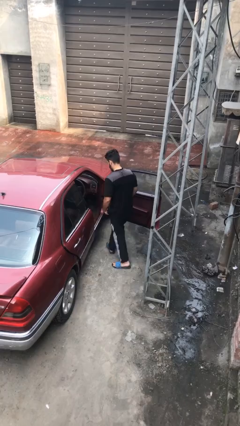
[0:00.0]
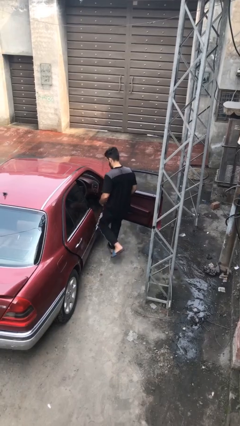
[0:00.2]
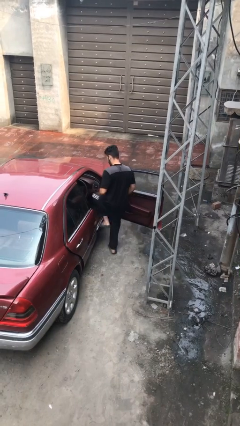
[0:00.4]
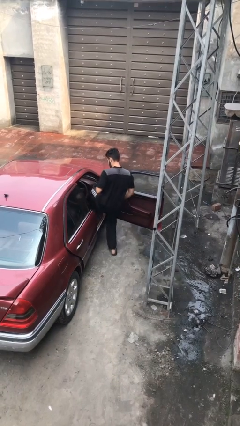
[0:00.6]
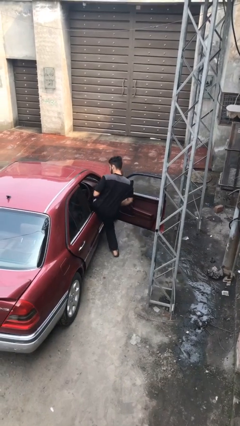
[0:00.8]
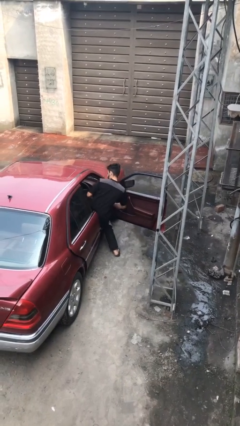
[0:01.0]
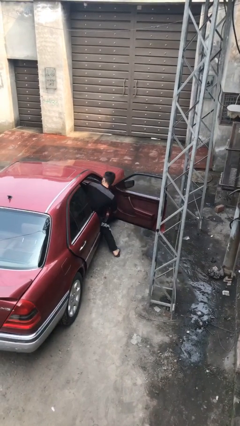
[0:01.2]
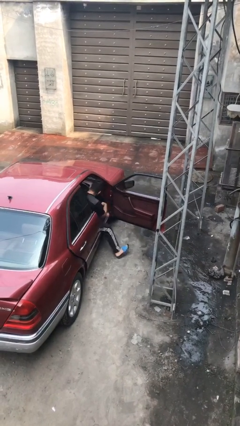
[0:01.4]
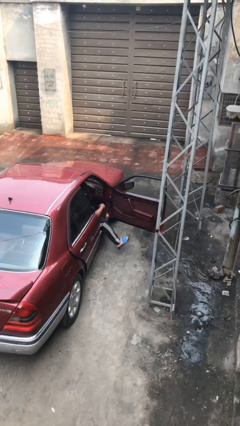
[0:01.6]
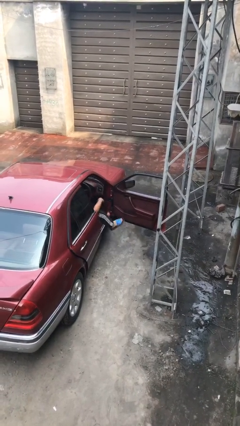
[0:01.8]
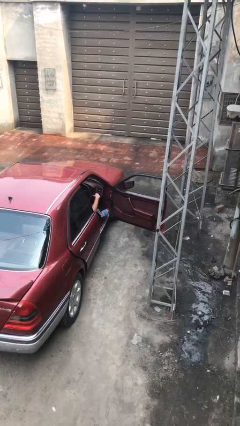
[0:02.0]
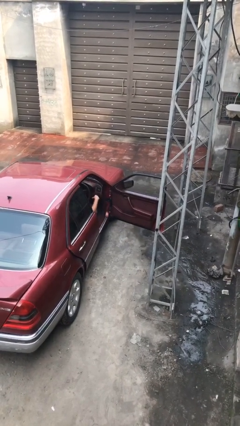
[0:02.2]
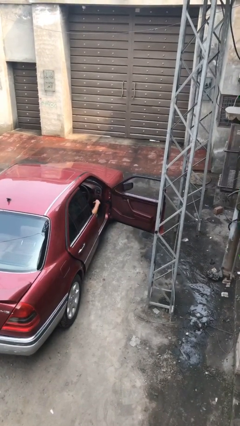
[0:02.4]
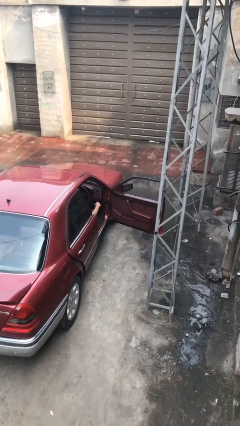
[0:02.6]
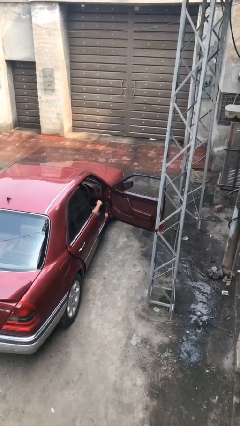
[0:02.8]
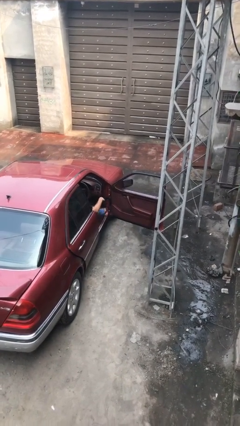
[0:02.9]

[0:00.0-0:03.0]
person enters car

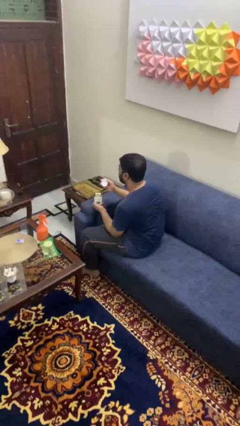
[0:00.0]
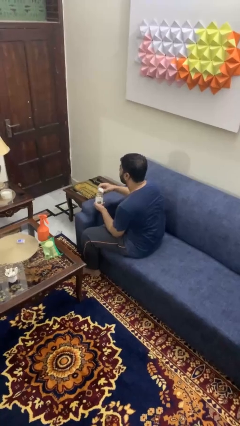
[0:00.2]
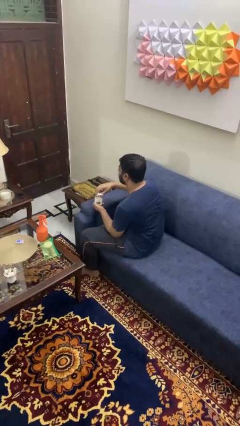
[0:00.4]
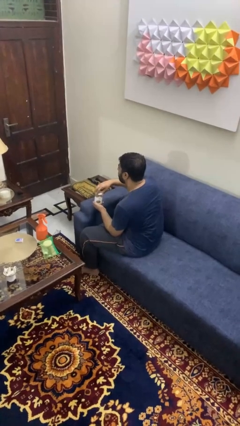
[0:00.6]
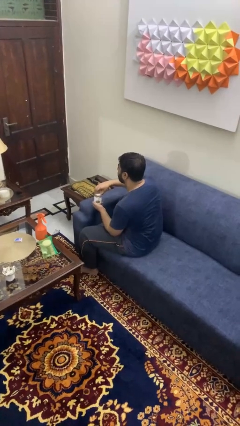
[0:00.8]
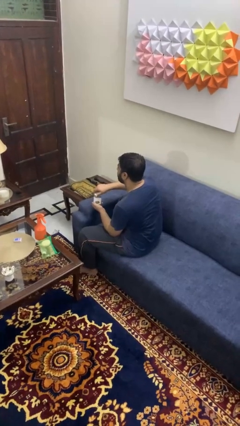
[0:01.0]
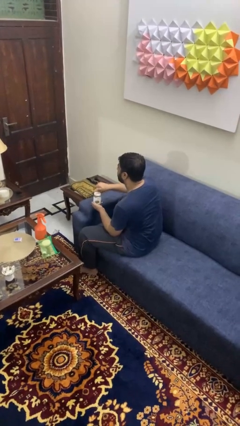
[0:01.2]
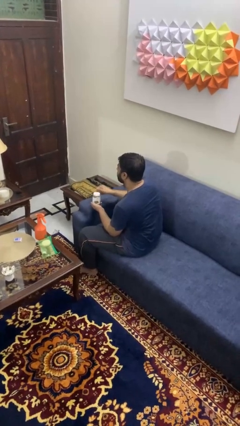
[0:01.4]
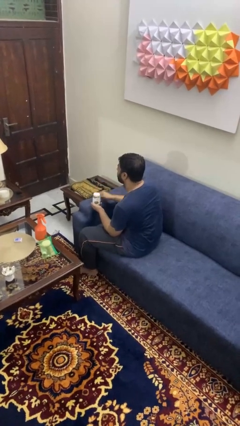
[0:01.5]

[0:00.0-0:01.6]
person closes jar

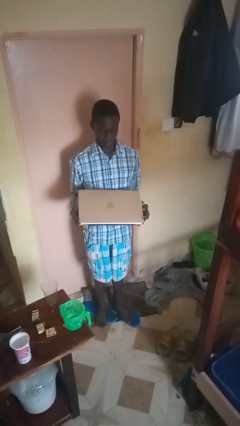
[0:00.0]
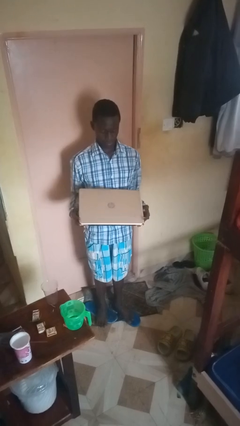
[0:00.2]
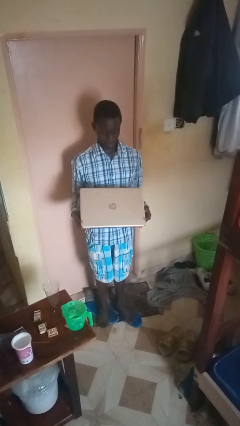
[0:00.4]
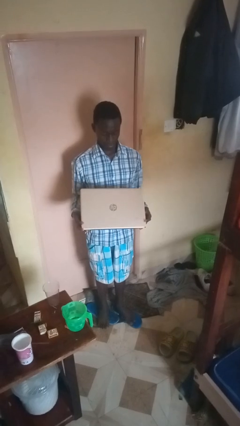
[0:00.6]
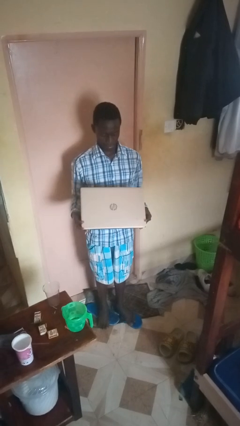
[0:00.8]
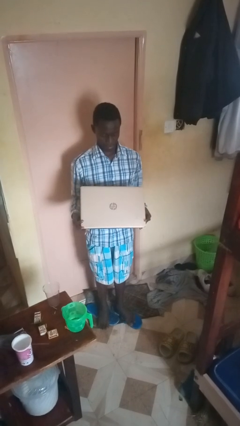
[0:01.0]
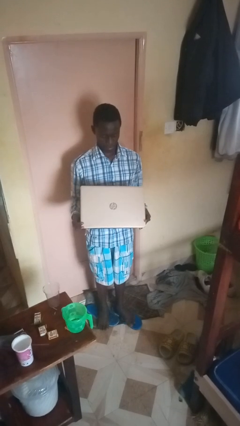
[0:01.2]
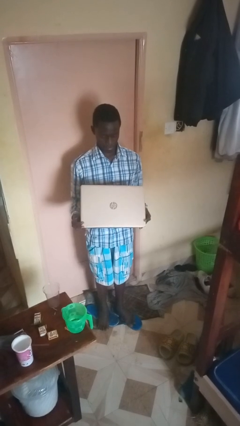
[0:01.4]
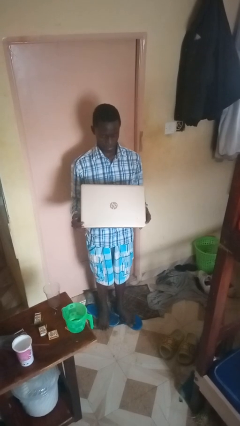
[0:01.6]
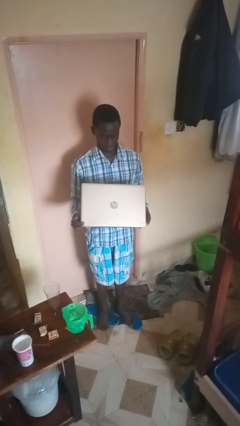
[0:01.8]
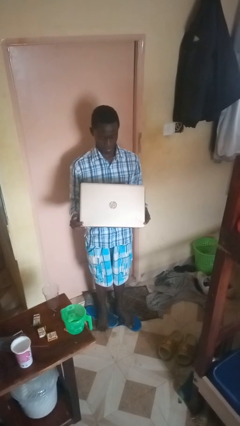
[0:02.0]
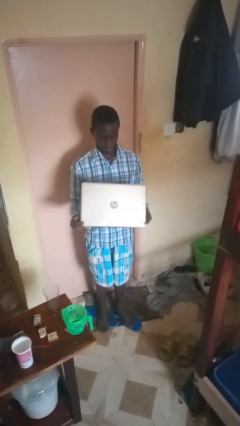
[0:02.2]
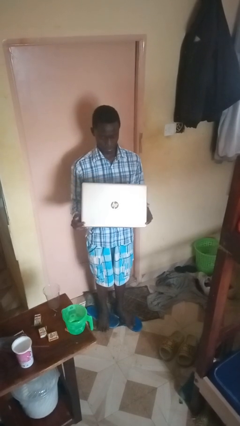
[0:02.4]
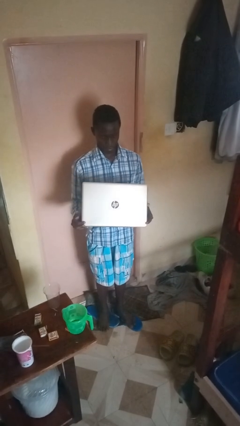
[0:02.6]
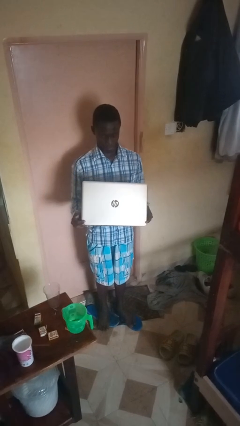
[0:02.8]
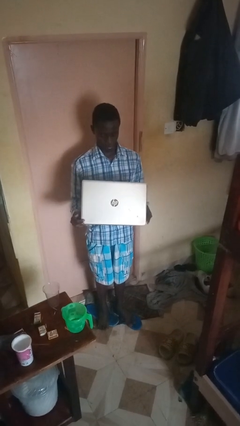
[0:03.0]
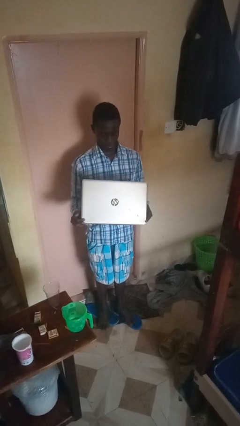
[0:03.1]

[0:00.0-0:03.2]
person opens laptop

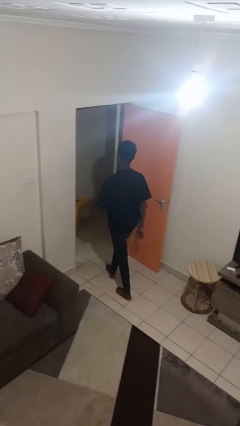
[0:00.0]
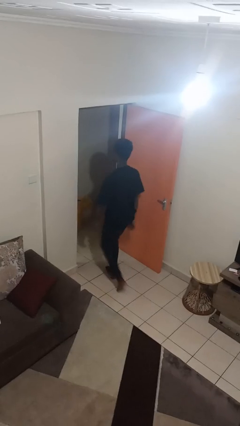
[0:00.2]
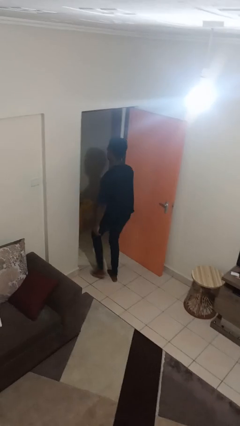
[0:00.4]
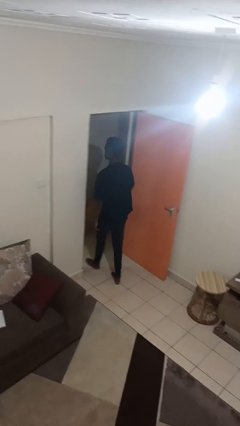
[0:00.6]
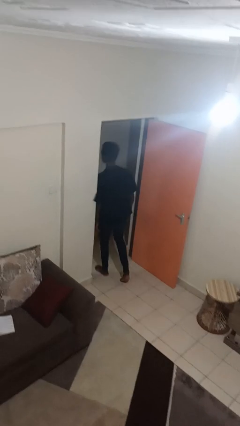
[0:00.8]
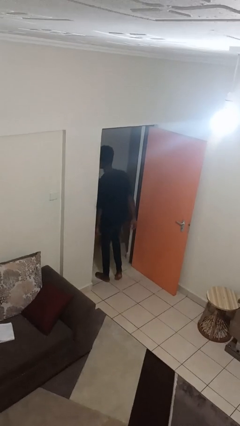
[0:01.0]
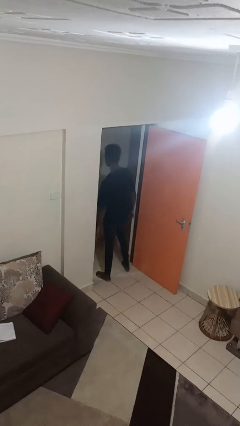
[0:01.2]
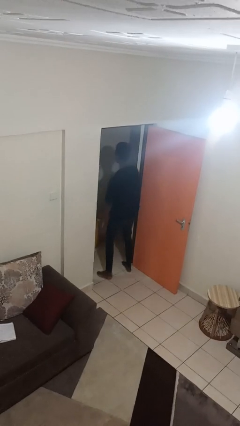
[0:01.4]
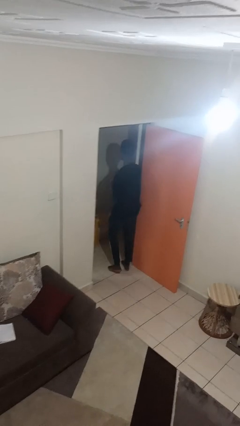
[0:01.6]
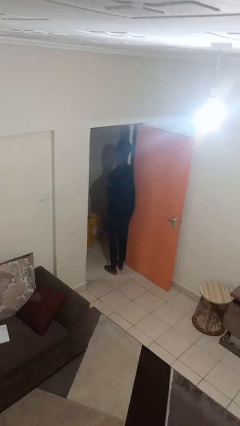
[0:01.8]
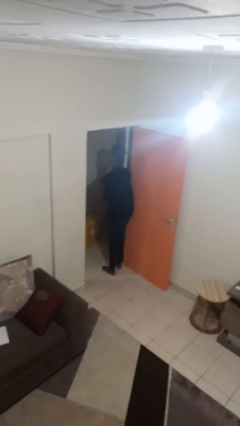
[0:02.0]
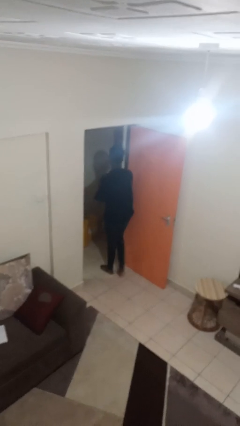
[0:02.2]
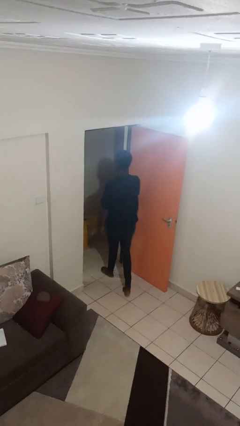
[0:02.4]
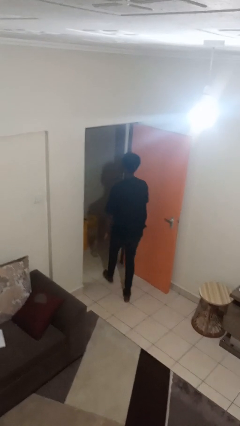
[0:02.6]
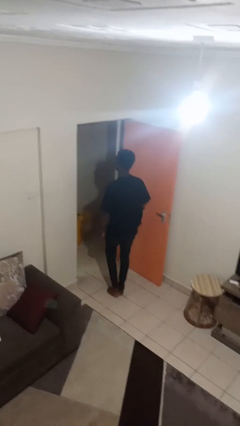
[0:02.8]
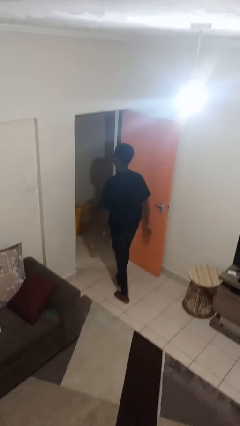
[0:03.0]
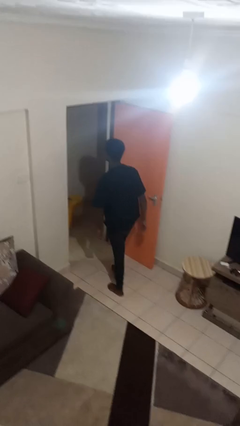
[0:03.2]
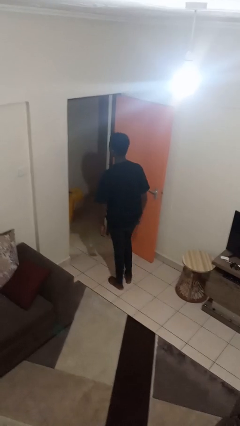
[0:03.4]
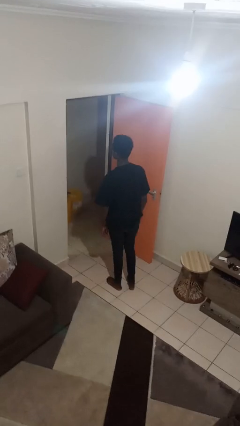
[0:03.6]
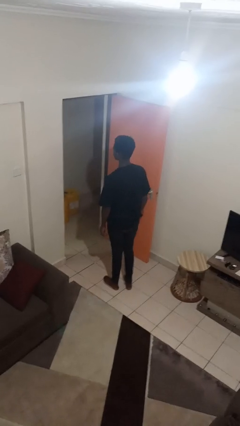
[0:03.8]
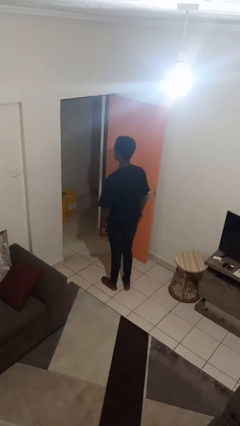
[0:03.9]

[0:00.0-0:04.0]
person bumps into wall

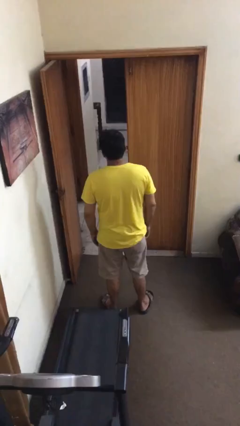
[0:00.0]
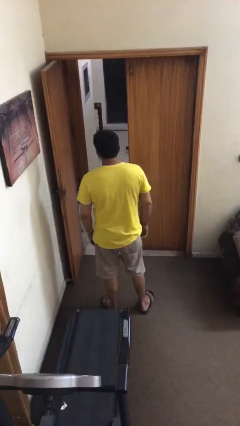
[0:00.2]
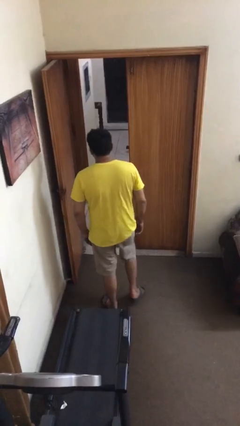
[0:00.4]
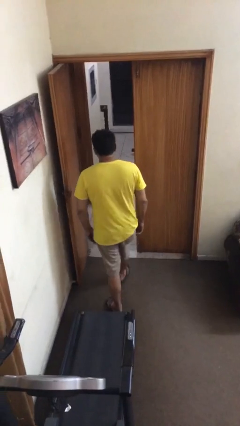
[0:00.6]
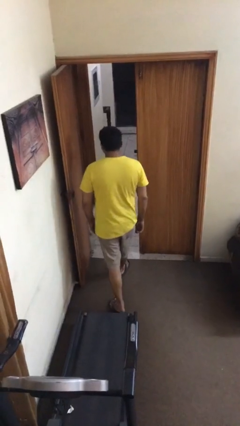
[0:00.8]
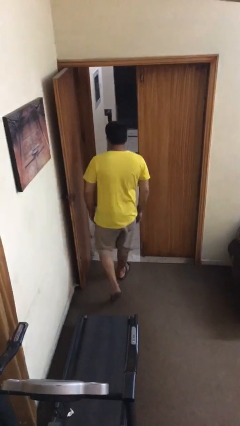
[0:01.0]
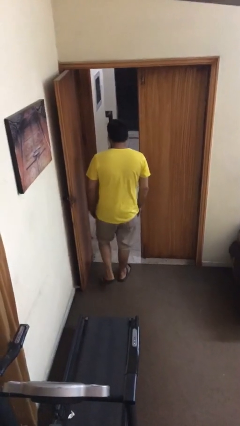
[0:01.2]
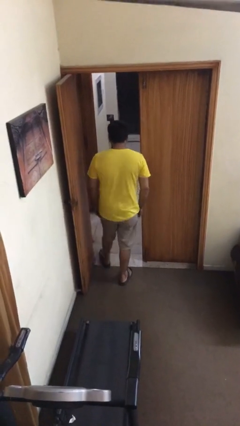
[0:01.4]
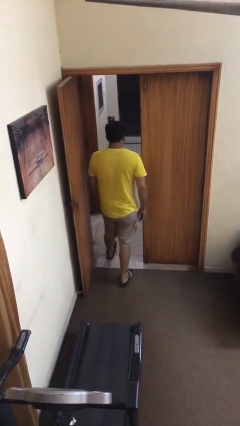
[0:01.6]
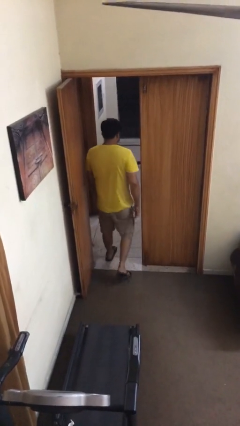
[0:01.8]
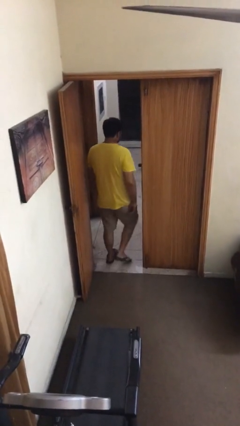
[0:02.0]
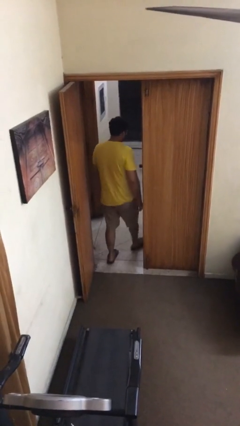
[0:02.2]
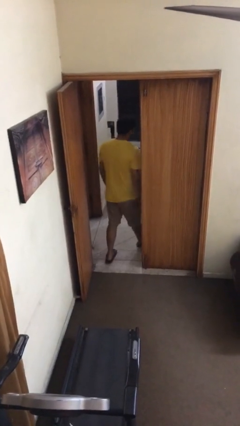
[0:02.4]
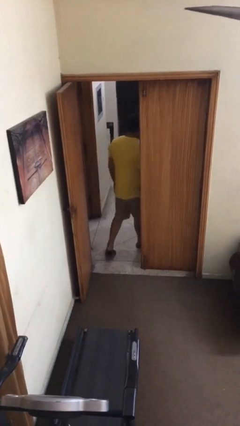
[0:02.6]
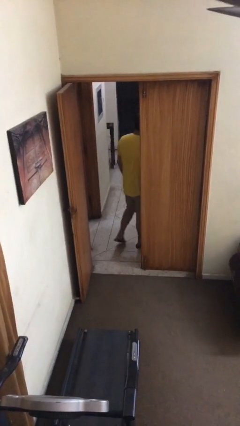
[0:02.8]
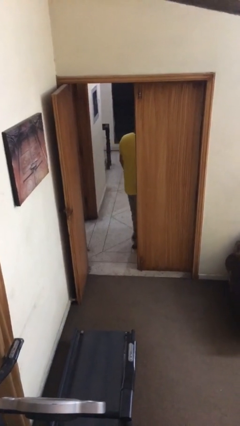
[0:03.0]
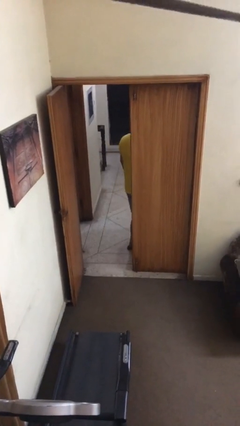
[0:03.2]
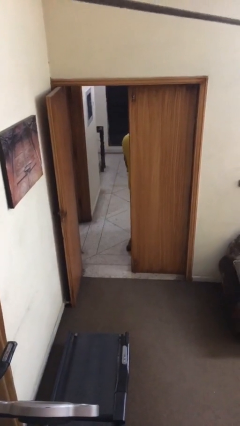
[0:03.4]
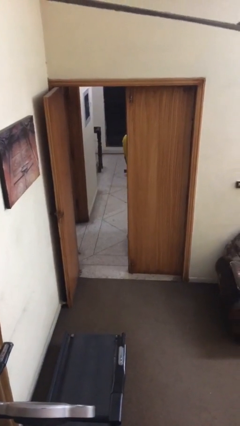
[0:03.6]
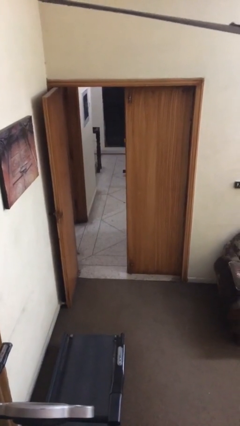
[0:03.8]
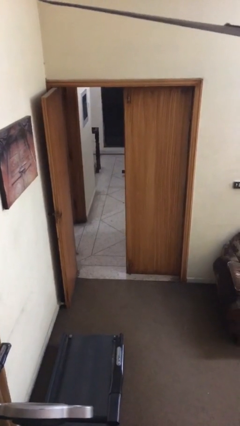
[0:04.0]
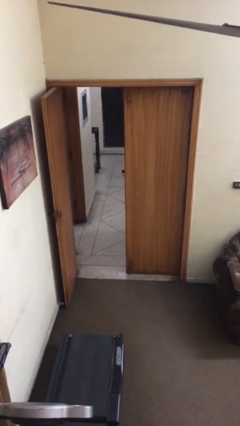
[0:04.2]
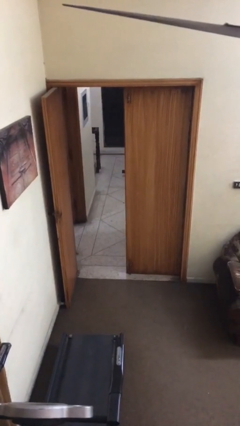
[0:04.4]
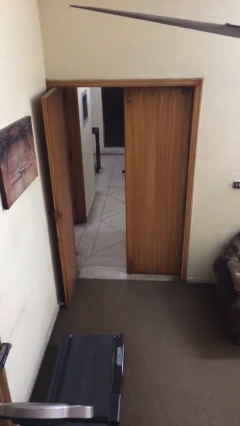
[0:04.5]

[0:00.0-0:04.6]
person exits scene through structure

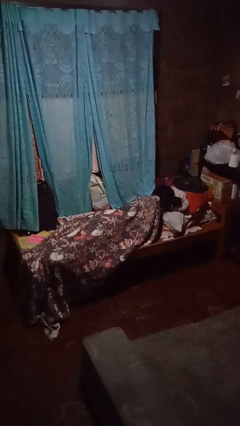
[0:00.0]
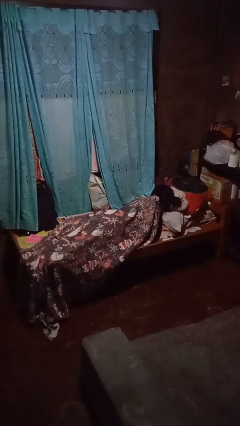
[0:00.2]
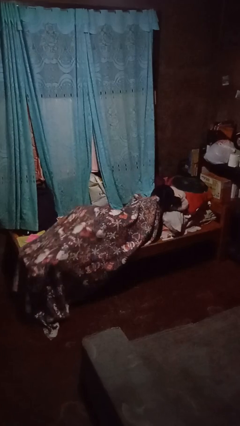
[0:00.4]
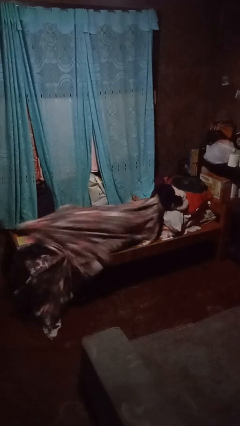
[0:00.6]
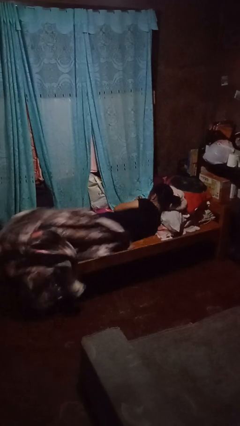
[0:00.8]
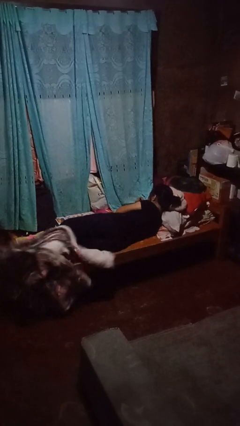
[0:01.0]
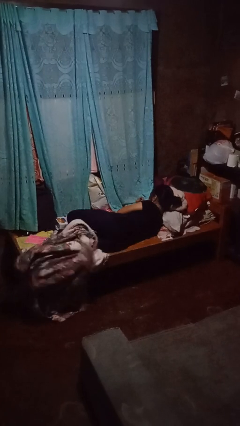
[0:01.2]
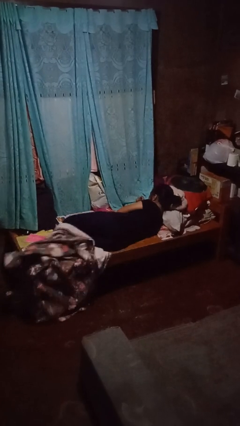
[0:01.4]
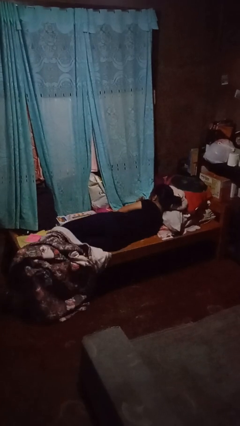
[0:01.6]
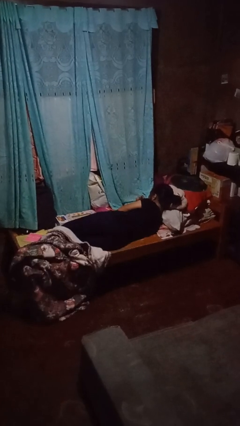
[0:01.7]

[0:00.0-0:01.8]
person uncovers with bedsheets
